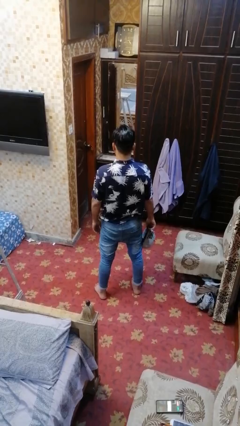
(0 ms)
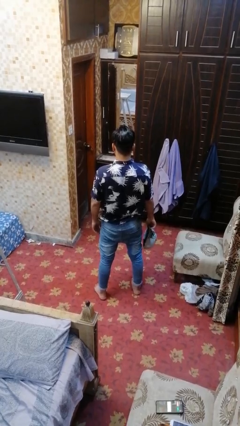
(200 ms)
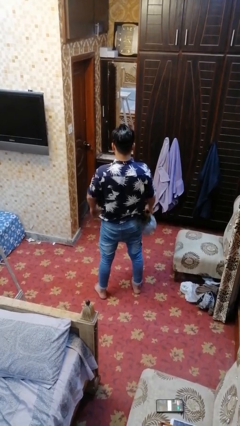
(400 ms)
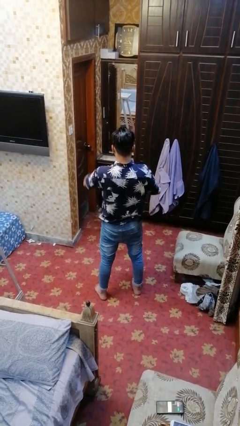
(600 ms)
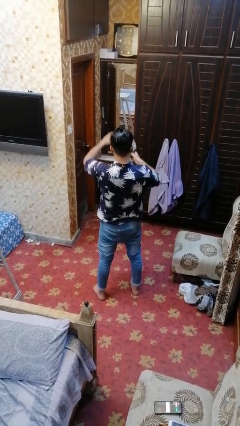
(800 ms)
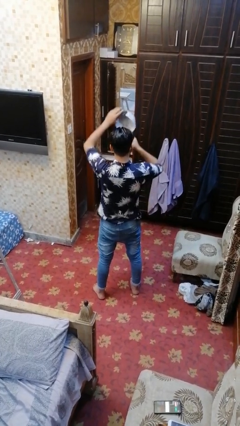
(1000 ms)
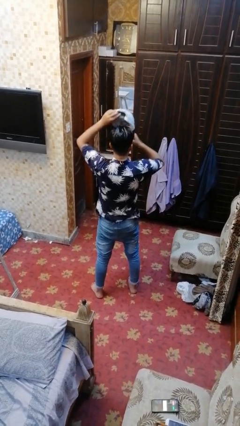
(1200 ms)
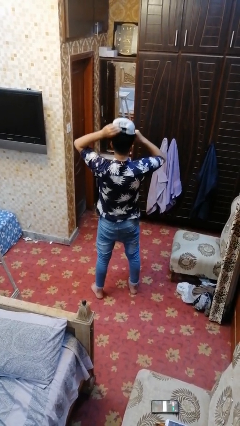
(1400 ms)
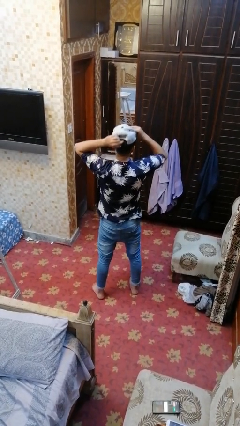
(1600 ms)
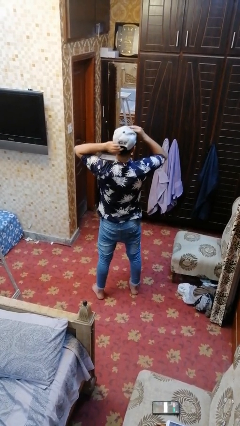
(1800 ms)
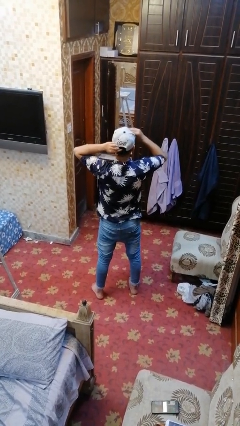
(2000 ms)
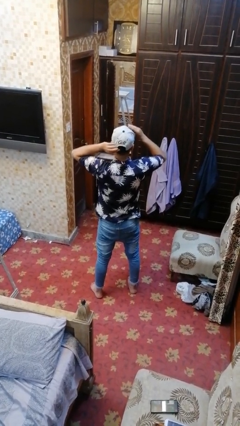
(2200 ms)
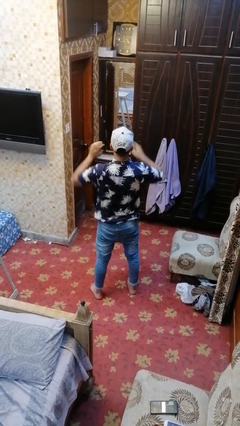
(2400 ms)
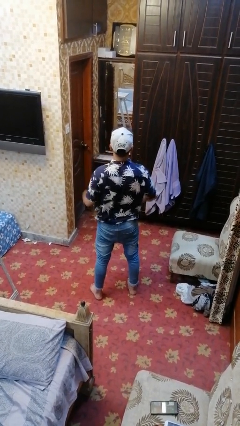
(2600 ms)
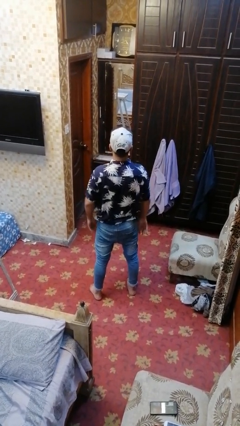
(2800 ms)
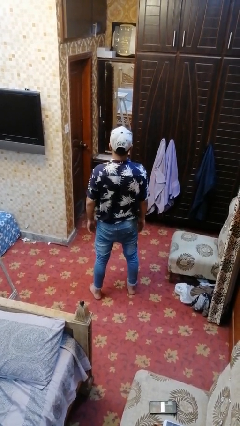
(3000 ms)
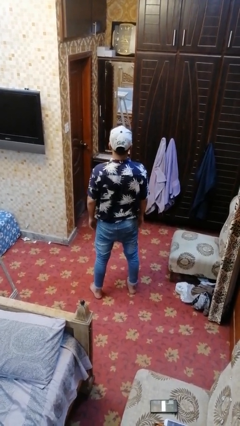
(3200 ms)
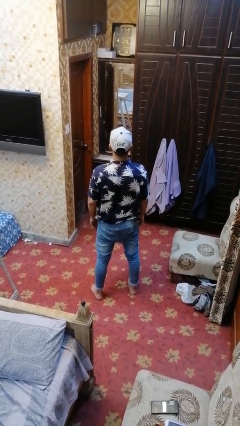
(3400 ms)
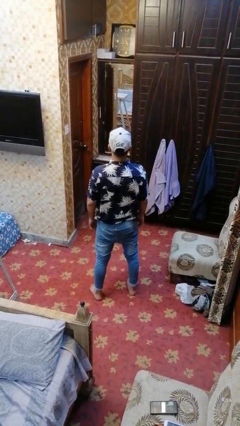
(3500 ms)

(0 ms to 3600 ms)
person puts on hat

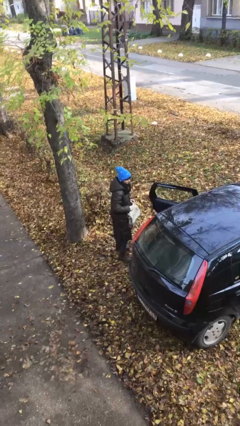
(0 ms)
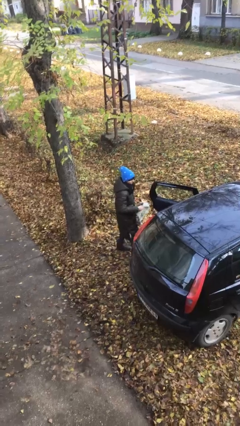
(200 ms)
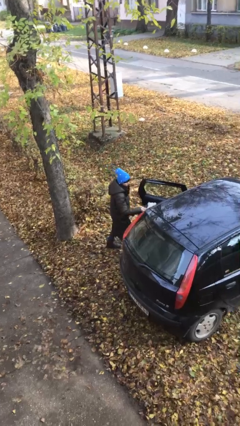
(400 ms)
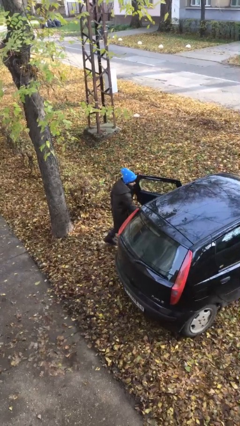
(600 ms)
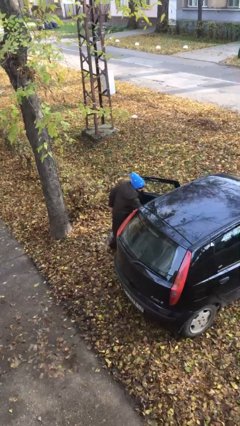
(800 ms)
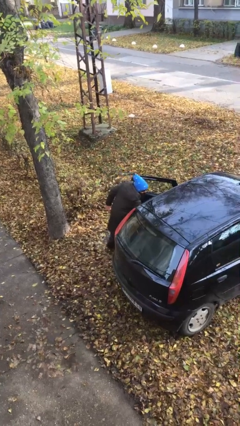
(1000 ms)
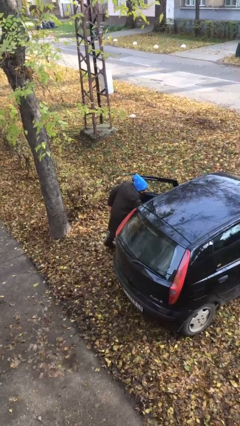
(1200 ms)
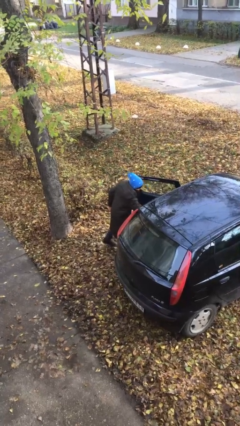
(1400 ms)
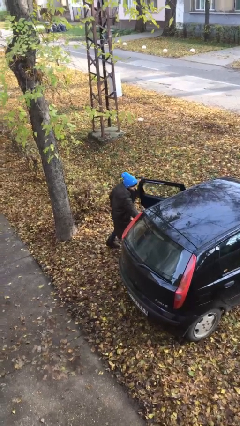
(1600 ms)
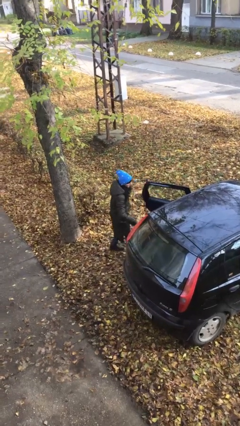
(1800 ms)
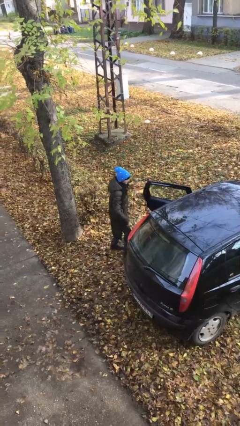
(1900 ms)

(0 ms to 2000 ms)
person loads car

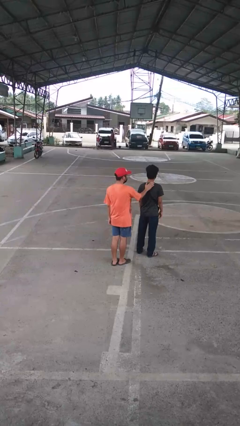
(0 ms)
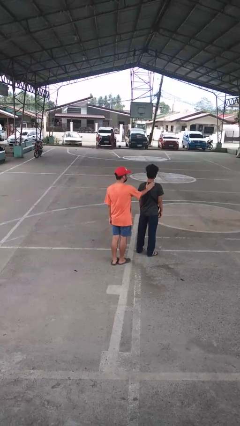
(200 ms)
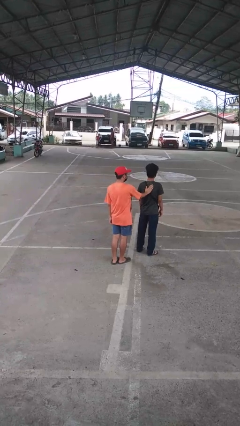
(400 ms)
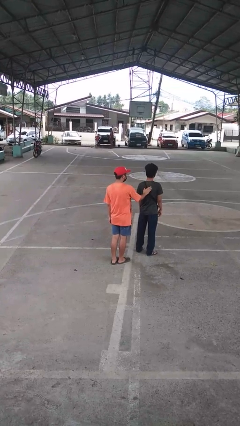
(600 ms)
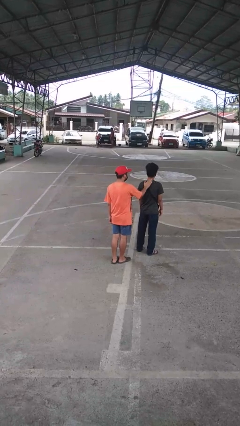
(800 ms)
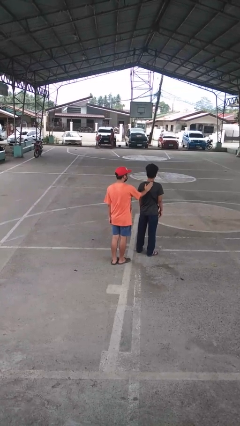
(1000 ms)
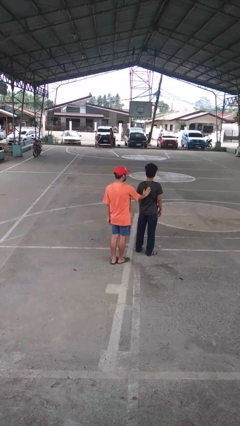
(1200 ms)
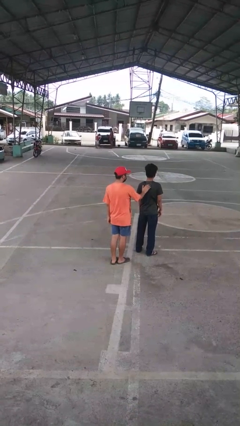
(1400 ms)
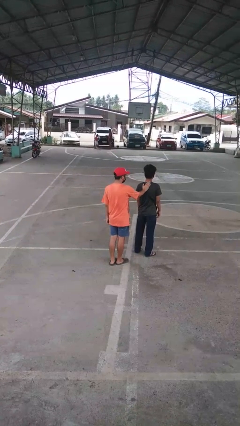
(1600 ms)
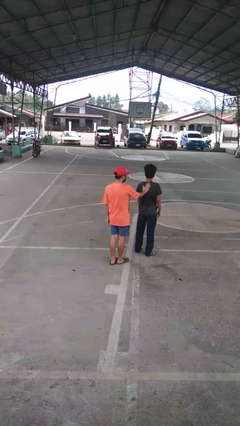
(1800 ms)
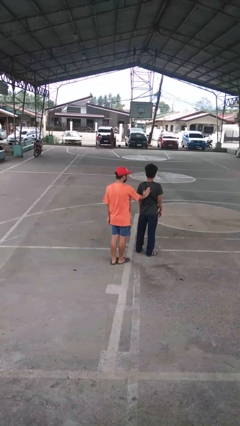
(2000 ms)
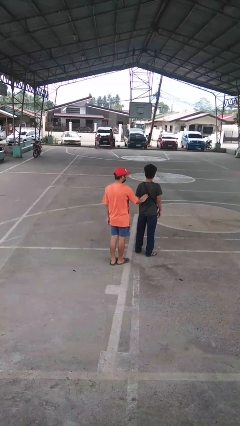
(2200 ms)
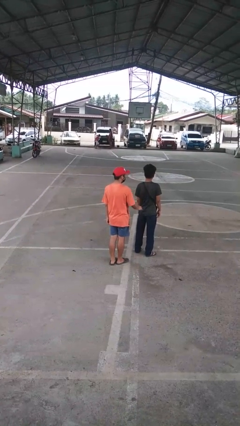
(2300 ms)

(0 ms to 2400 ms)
person touches back of person

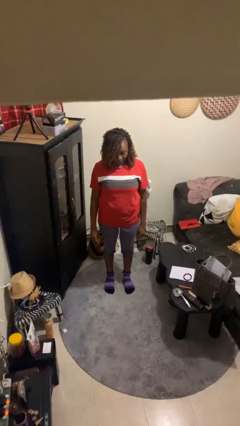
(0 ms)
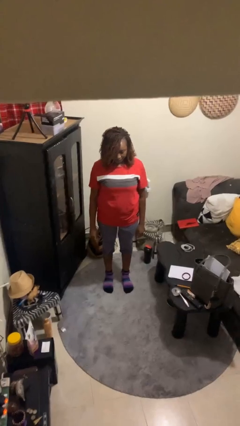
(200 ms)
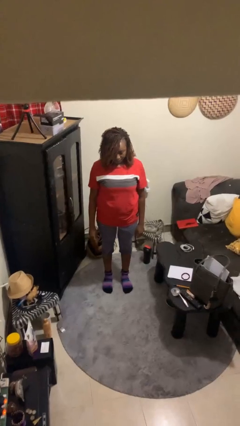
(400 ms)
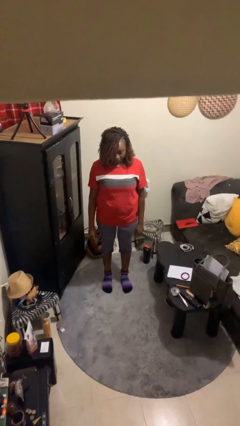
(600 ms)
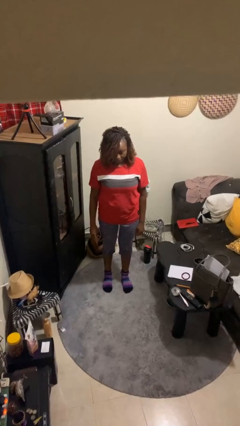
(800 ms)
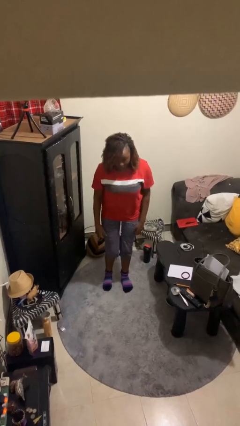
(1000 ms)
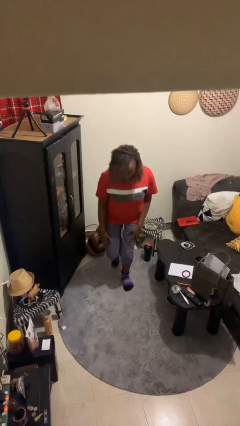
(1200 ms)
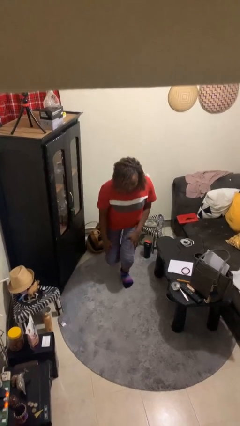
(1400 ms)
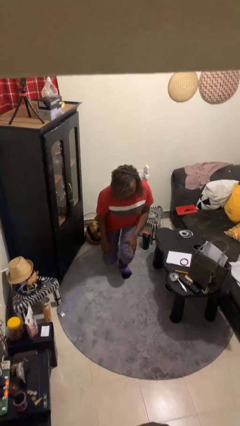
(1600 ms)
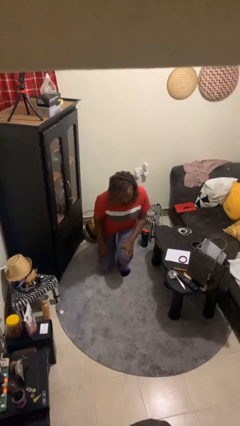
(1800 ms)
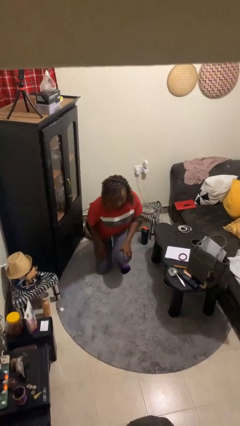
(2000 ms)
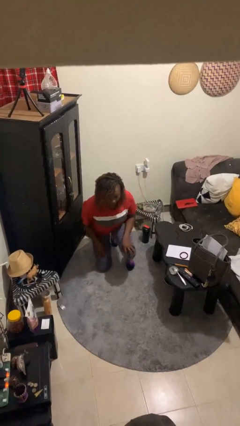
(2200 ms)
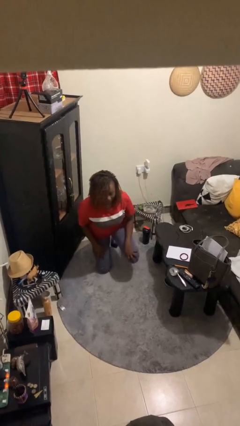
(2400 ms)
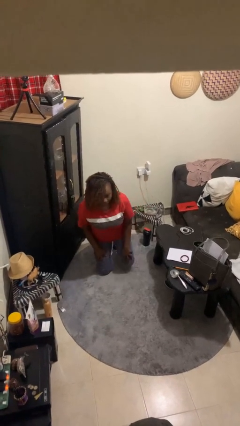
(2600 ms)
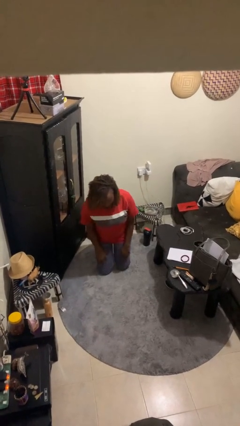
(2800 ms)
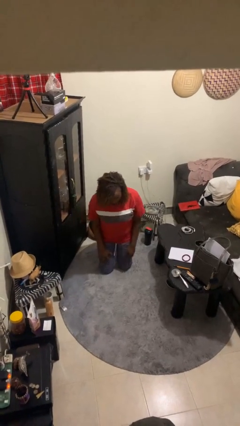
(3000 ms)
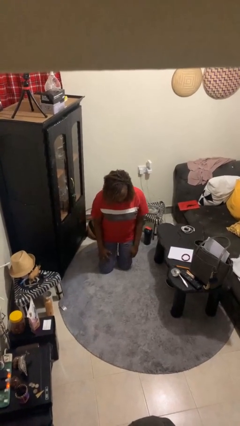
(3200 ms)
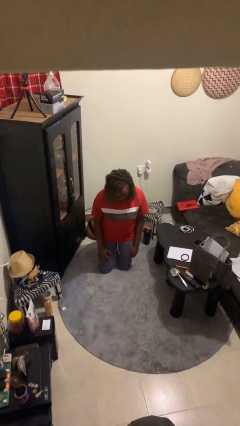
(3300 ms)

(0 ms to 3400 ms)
person kneels

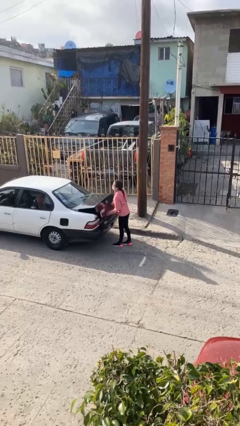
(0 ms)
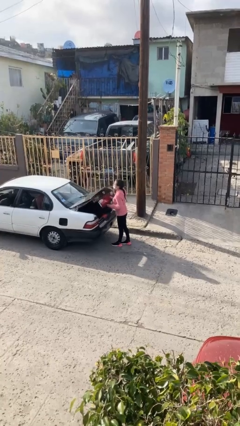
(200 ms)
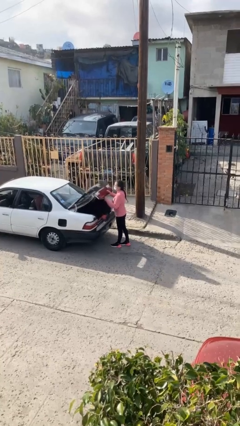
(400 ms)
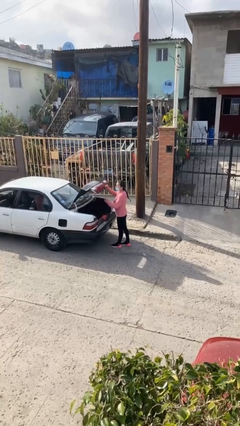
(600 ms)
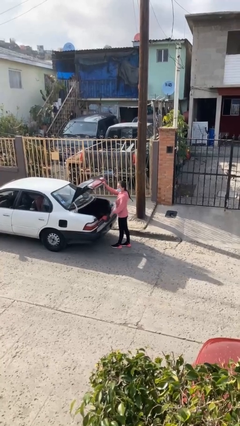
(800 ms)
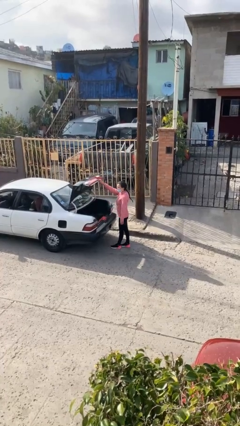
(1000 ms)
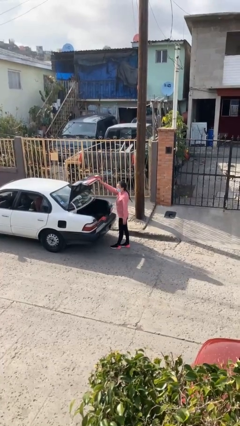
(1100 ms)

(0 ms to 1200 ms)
person opens car trunk

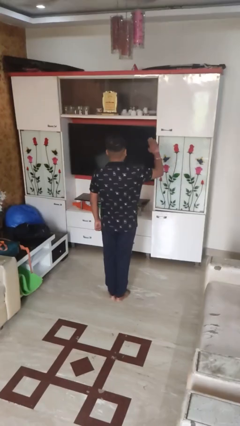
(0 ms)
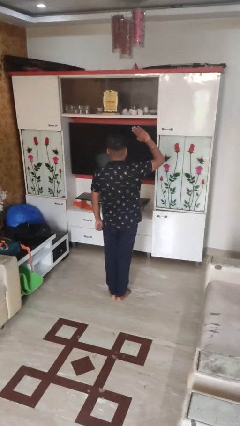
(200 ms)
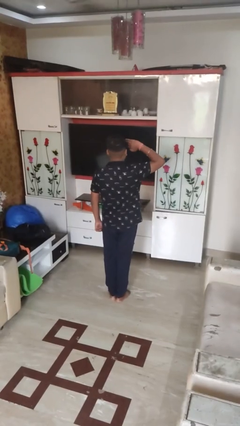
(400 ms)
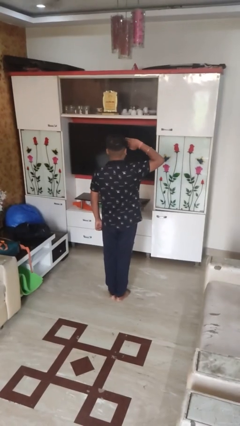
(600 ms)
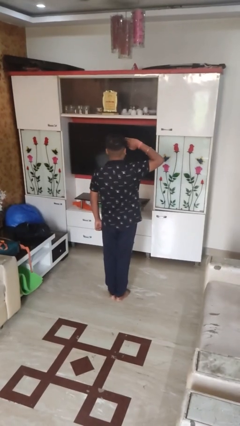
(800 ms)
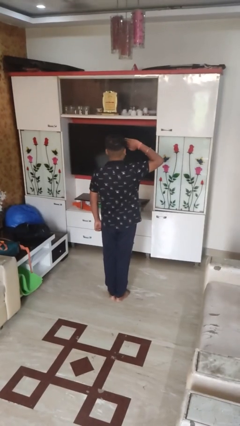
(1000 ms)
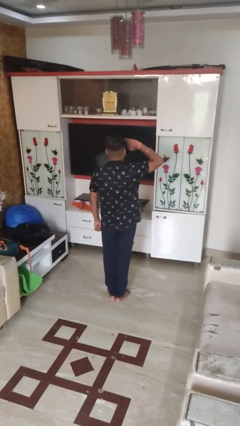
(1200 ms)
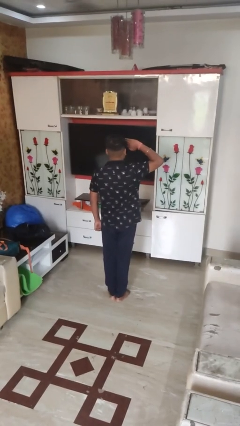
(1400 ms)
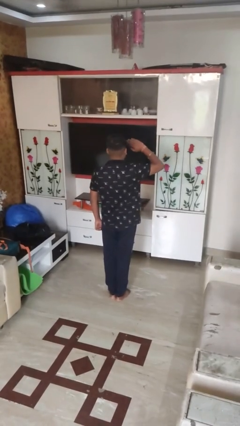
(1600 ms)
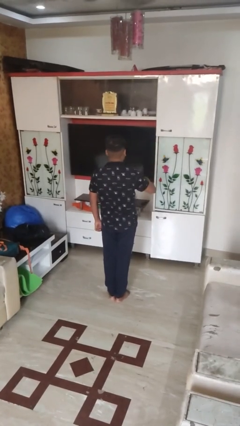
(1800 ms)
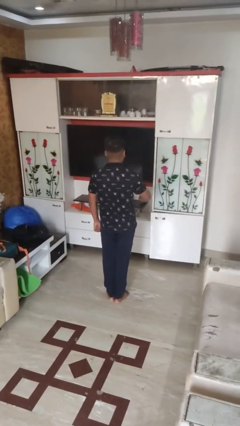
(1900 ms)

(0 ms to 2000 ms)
person salutes

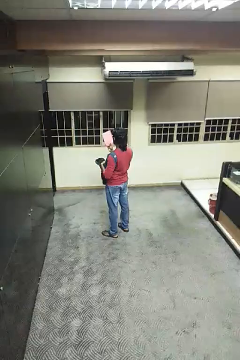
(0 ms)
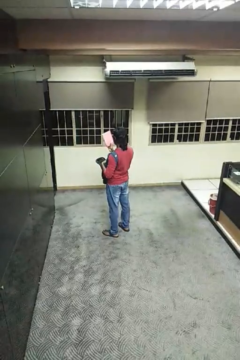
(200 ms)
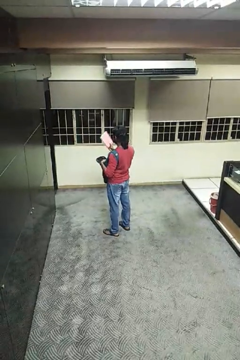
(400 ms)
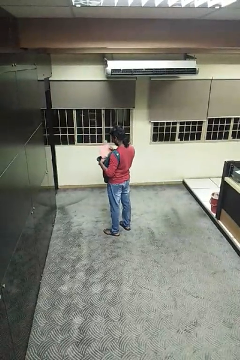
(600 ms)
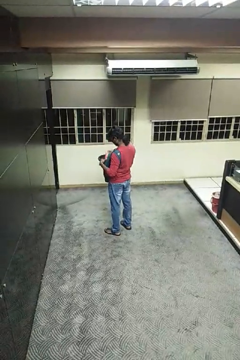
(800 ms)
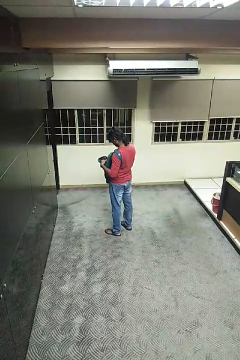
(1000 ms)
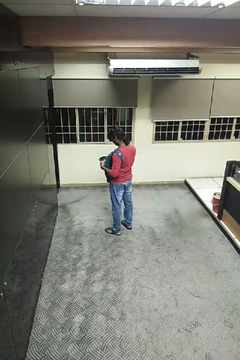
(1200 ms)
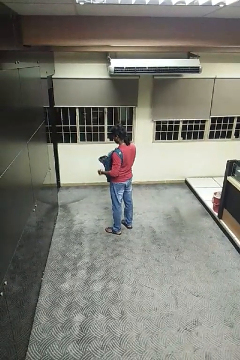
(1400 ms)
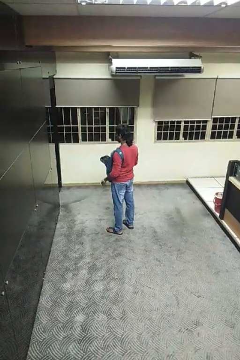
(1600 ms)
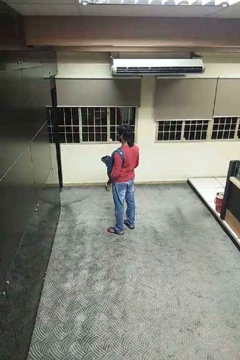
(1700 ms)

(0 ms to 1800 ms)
person puts object into backpack

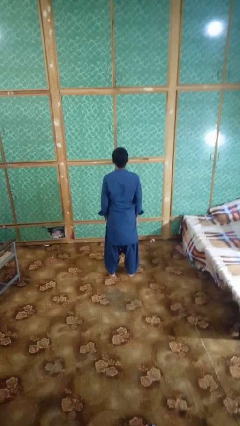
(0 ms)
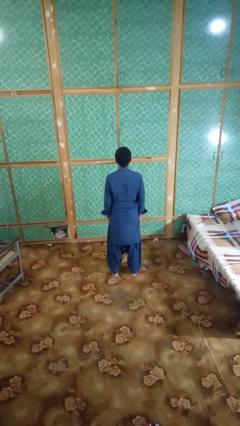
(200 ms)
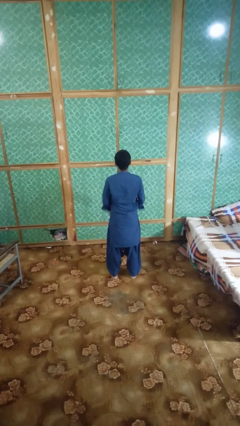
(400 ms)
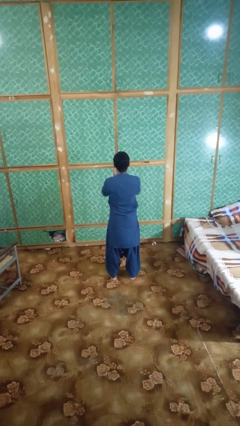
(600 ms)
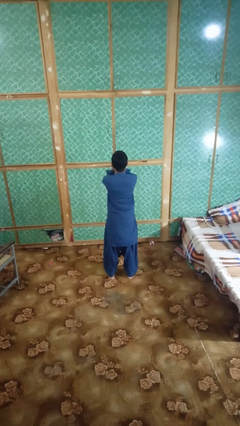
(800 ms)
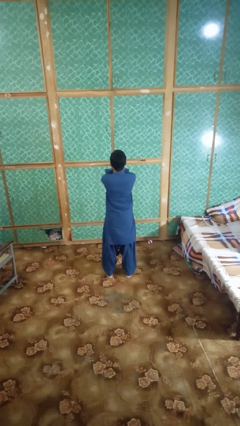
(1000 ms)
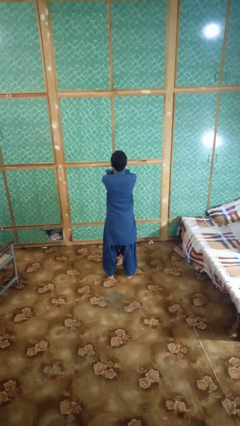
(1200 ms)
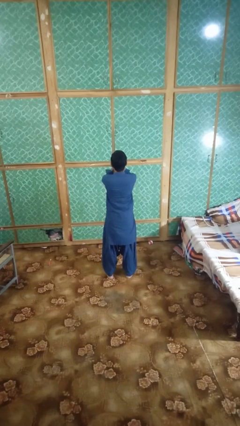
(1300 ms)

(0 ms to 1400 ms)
person covers face with hands
